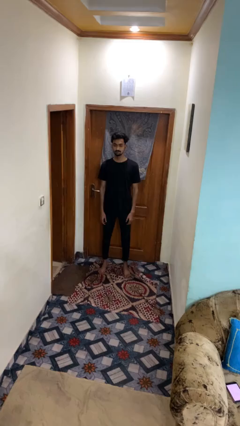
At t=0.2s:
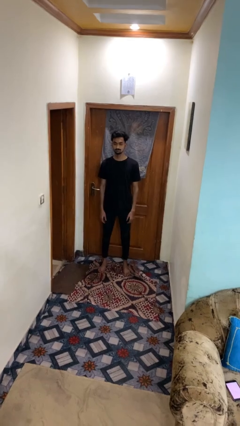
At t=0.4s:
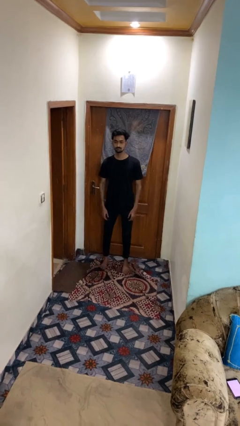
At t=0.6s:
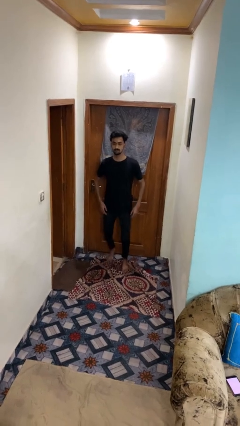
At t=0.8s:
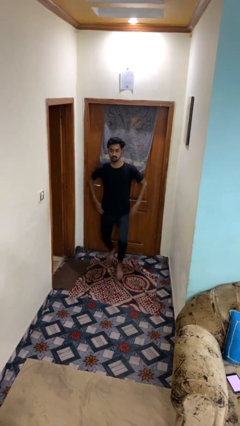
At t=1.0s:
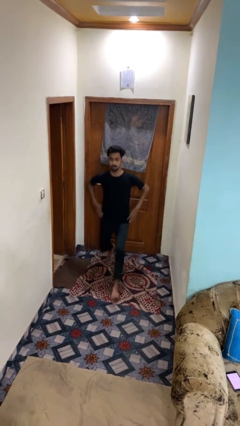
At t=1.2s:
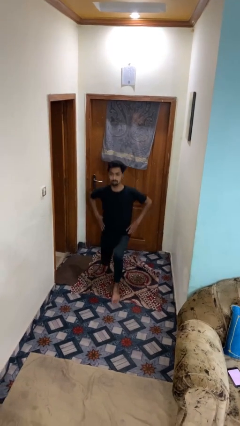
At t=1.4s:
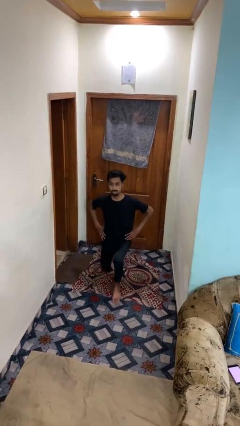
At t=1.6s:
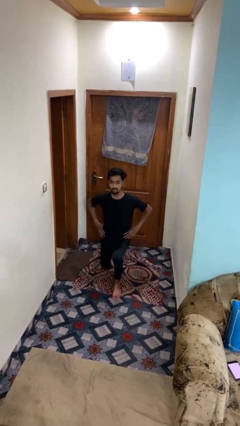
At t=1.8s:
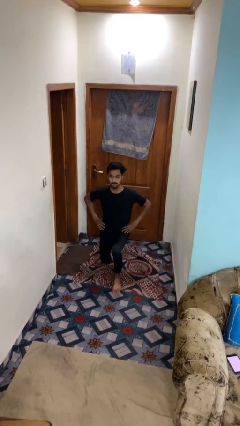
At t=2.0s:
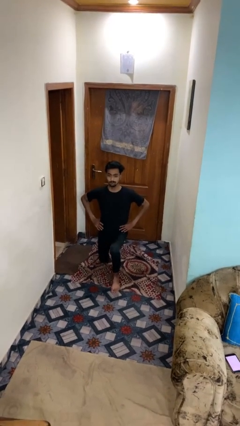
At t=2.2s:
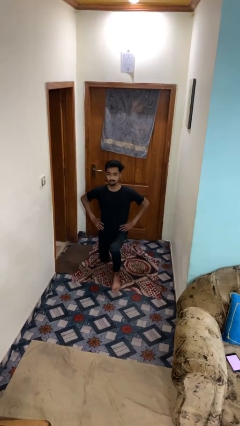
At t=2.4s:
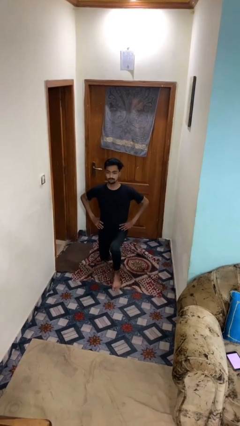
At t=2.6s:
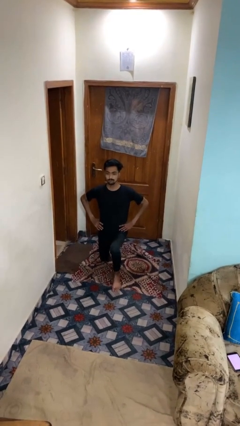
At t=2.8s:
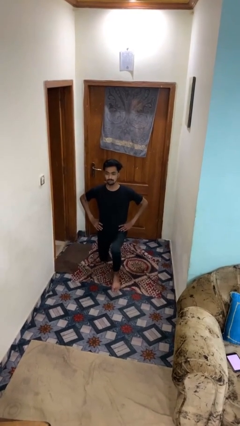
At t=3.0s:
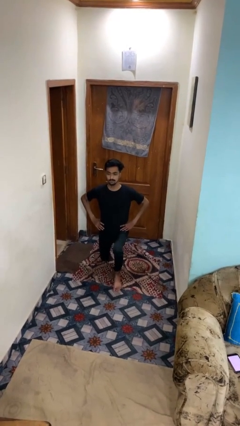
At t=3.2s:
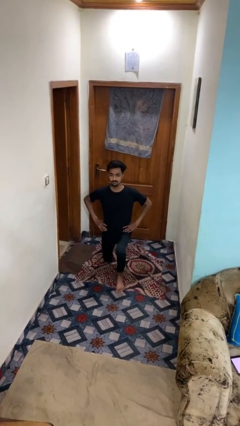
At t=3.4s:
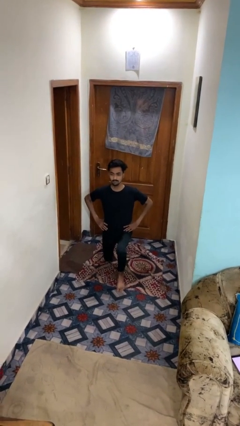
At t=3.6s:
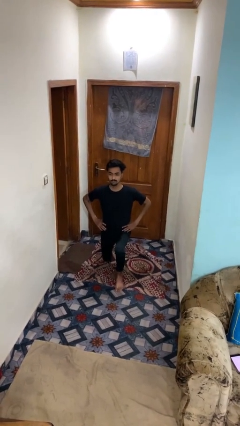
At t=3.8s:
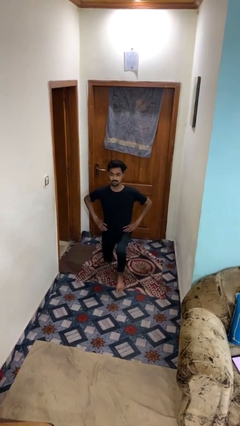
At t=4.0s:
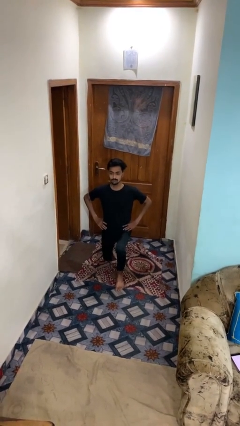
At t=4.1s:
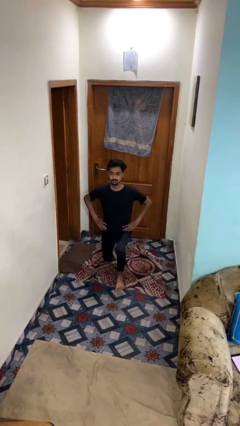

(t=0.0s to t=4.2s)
person exercises with lunges

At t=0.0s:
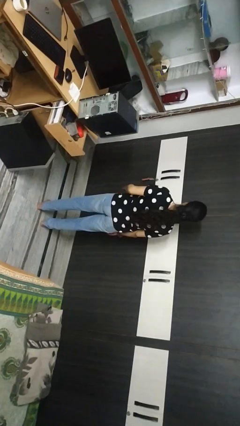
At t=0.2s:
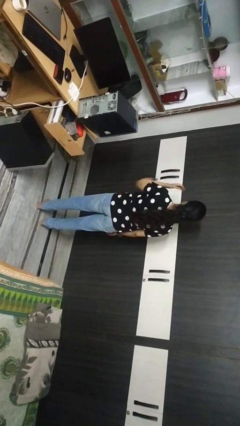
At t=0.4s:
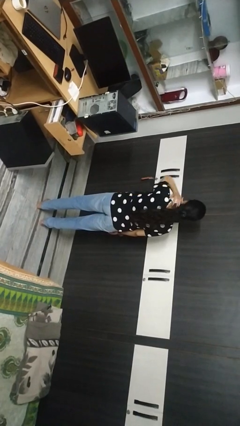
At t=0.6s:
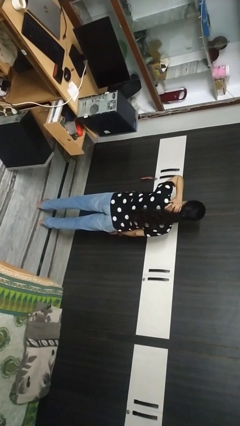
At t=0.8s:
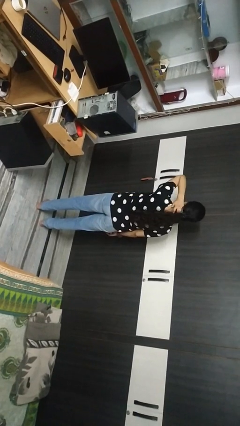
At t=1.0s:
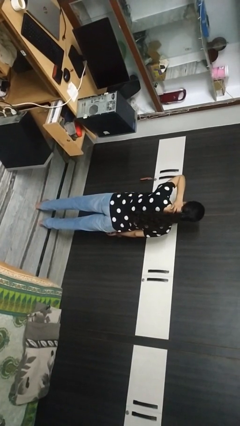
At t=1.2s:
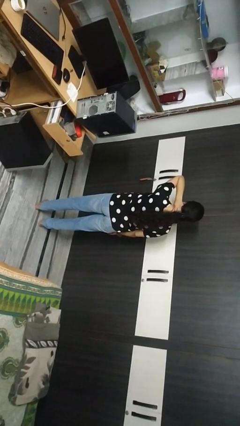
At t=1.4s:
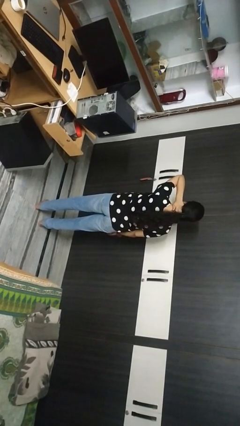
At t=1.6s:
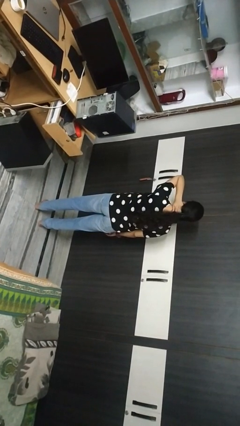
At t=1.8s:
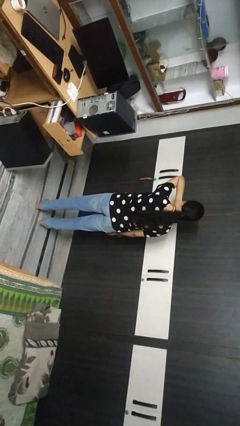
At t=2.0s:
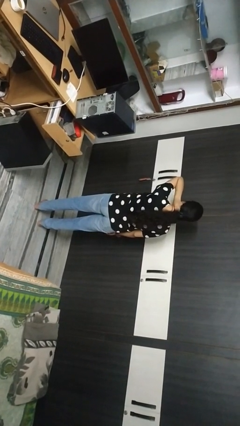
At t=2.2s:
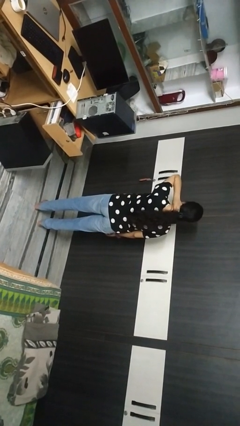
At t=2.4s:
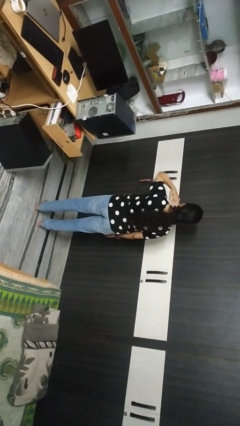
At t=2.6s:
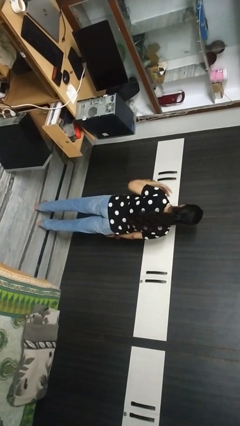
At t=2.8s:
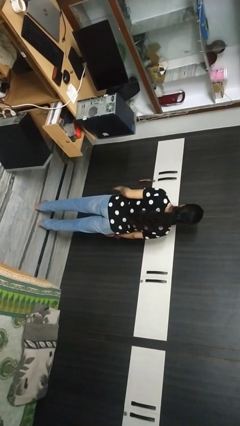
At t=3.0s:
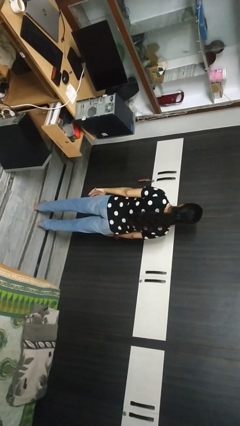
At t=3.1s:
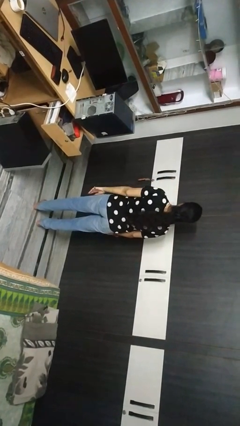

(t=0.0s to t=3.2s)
person rubs neck

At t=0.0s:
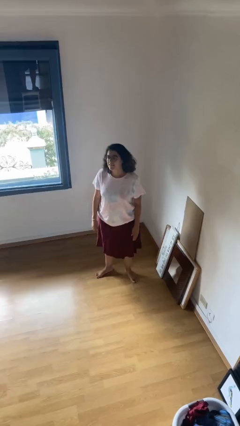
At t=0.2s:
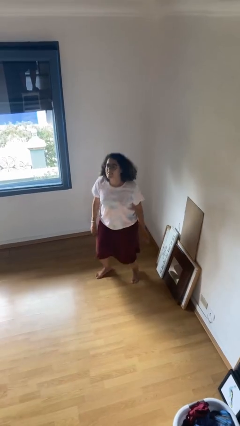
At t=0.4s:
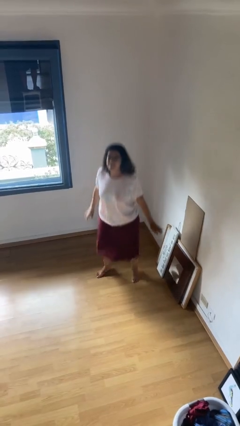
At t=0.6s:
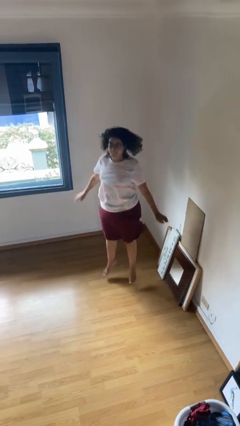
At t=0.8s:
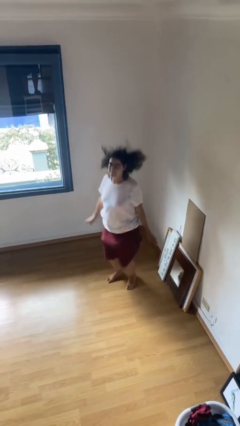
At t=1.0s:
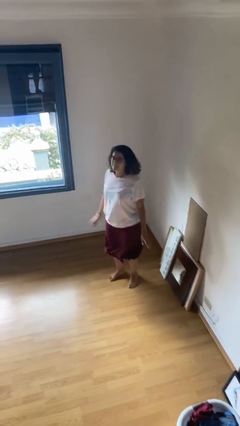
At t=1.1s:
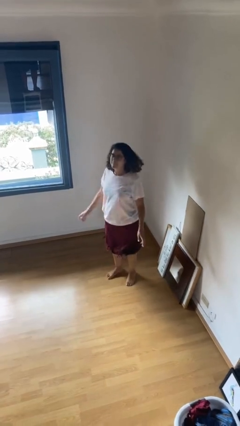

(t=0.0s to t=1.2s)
person jumps

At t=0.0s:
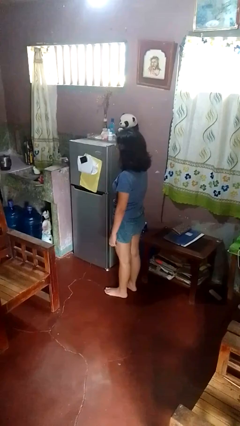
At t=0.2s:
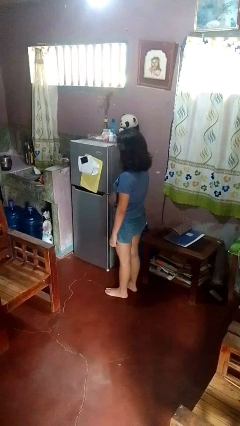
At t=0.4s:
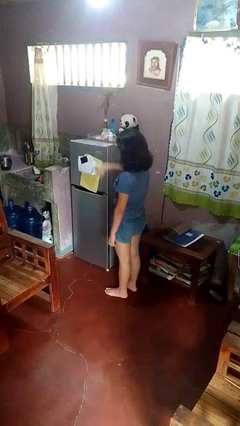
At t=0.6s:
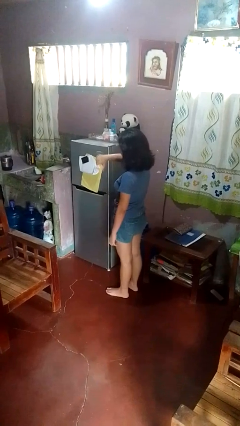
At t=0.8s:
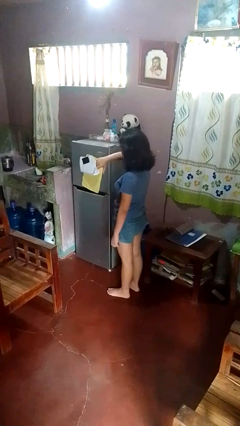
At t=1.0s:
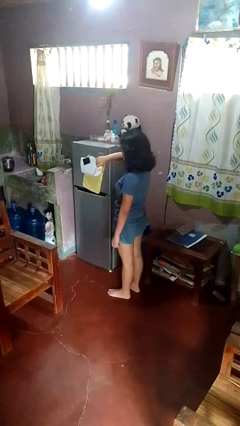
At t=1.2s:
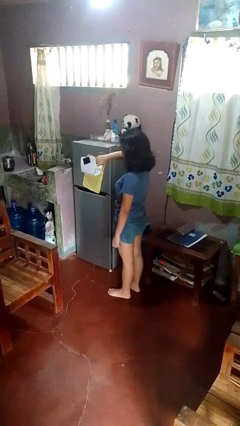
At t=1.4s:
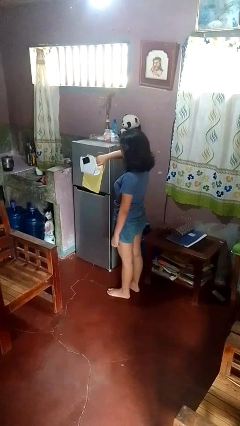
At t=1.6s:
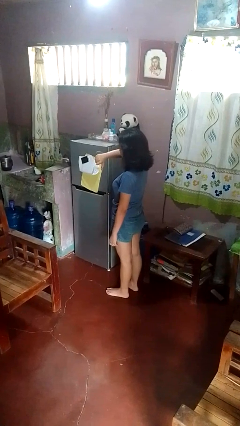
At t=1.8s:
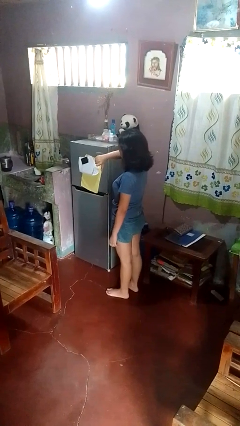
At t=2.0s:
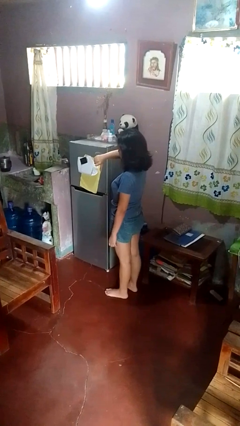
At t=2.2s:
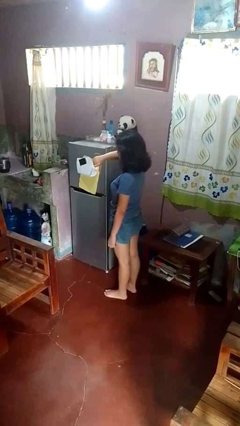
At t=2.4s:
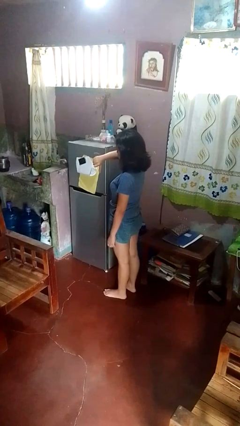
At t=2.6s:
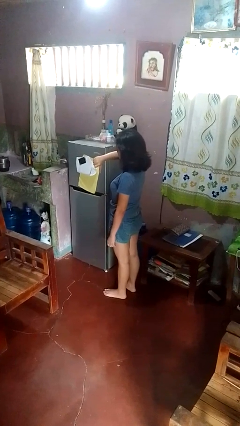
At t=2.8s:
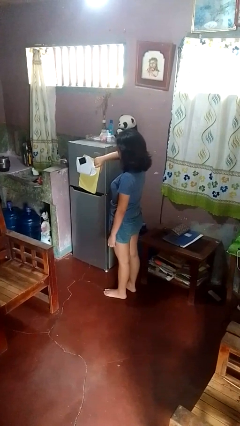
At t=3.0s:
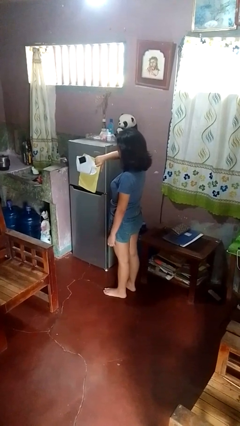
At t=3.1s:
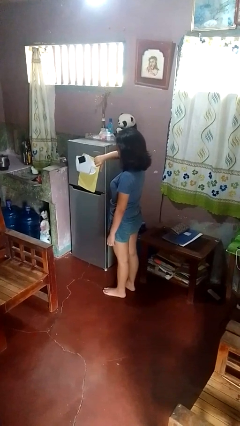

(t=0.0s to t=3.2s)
person gestures thumbs down

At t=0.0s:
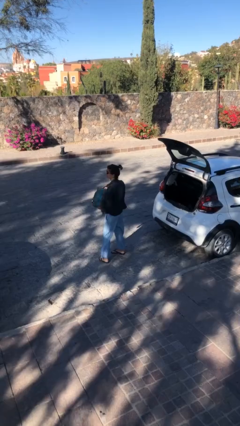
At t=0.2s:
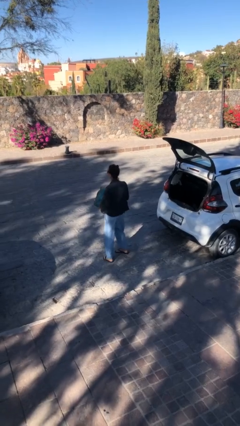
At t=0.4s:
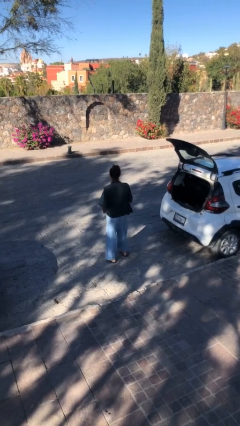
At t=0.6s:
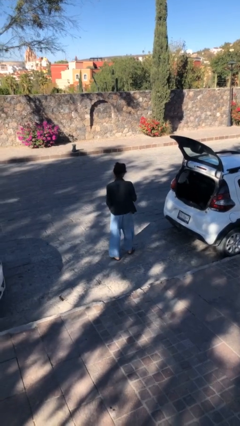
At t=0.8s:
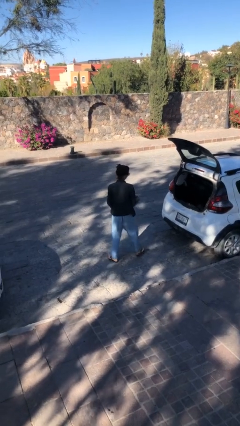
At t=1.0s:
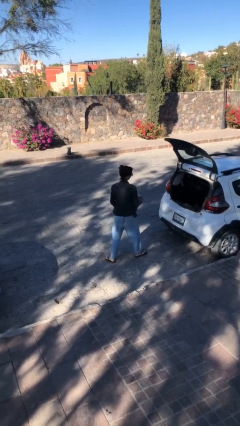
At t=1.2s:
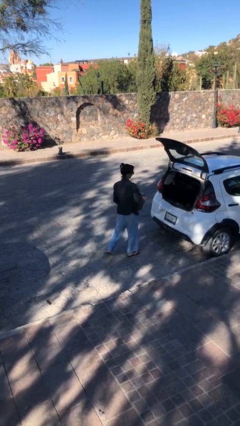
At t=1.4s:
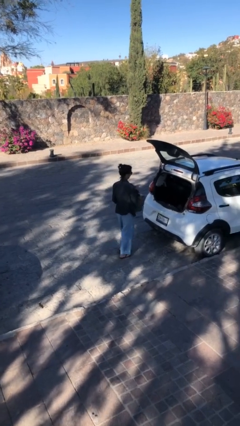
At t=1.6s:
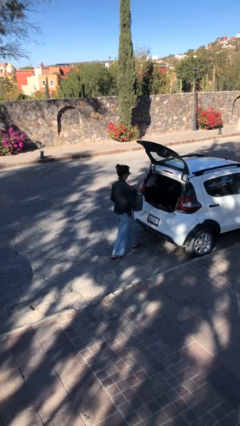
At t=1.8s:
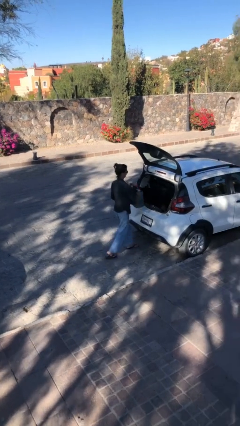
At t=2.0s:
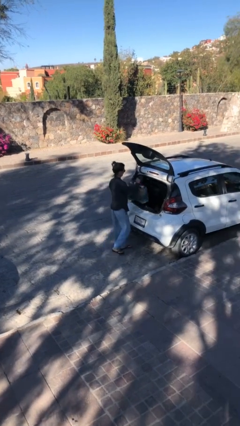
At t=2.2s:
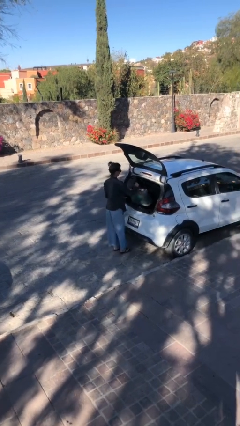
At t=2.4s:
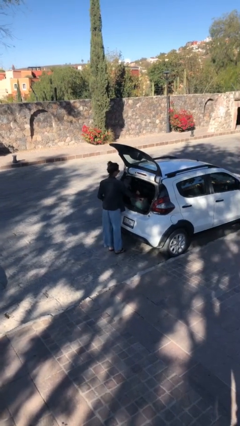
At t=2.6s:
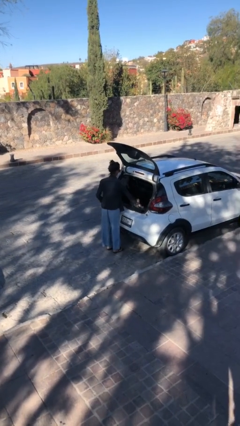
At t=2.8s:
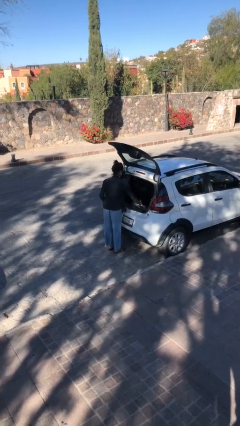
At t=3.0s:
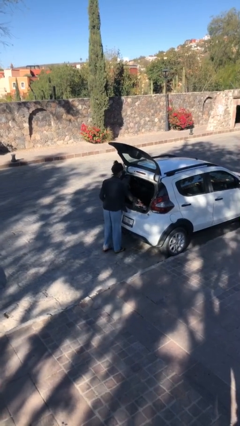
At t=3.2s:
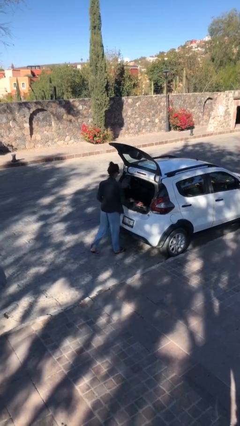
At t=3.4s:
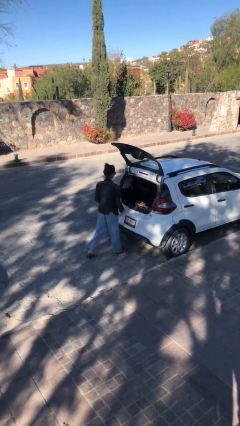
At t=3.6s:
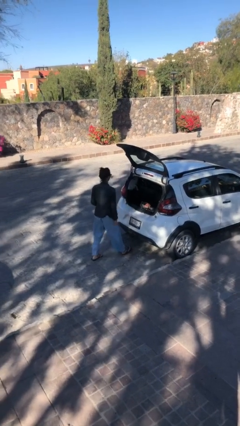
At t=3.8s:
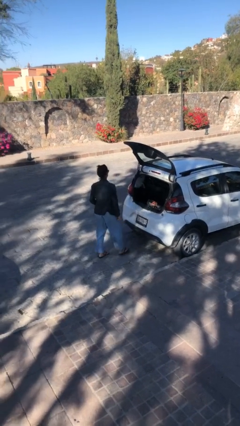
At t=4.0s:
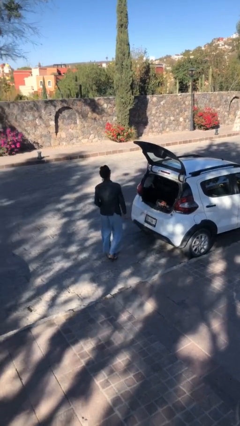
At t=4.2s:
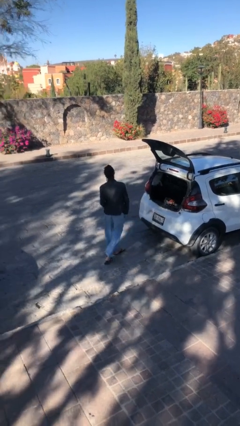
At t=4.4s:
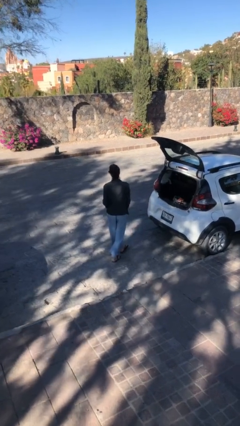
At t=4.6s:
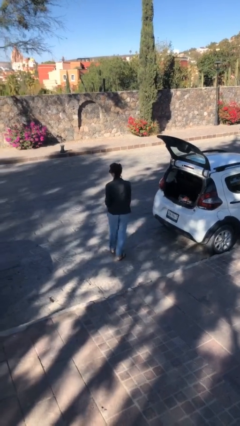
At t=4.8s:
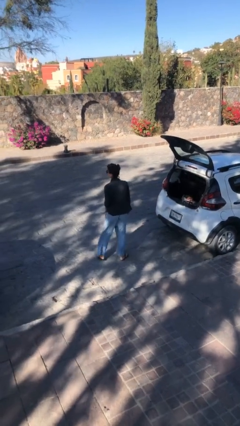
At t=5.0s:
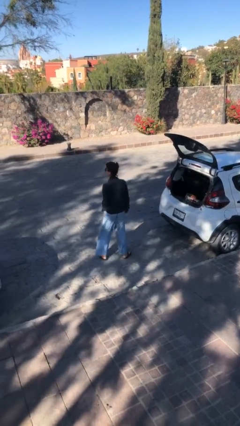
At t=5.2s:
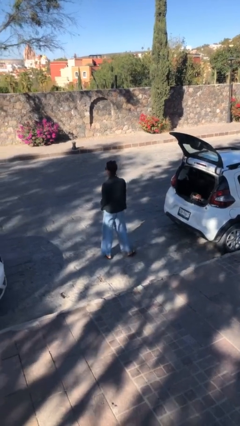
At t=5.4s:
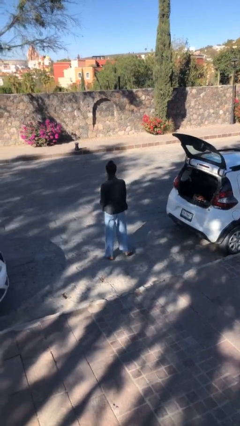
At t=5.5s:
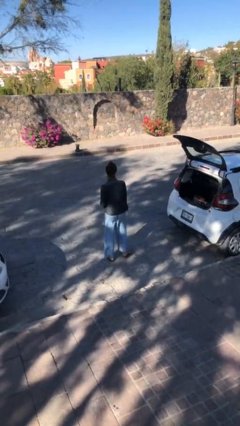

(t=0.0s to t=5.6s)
person unloads car
